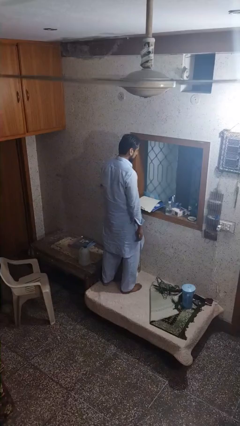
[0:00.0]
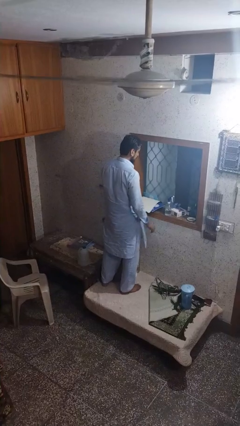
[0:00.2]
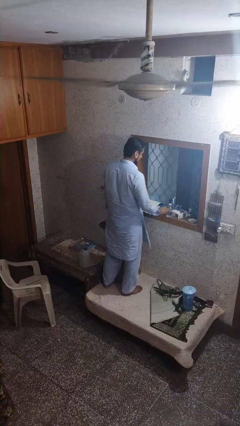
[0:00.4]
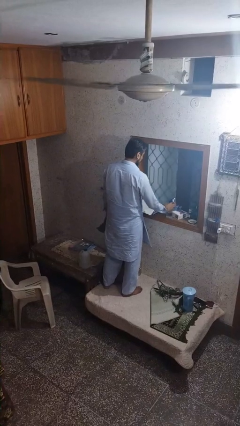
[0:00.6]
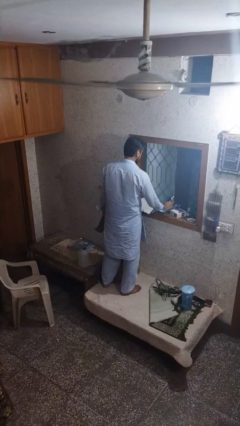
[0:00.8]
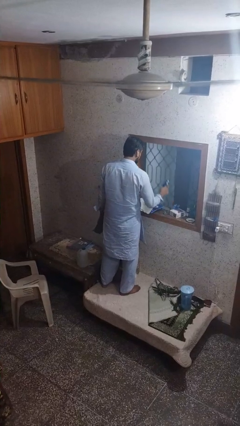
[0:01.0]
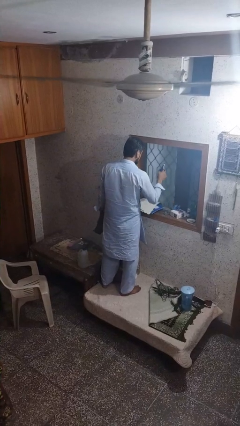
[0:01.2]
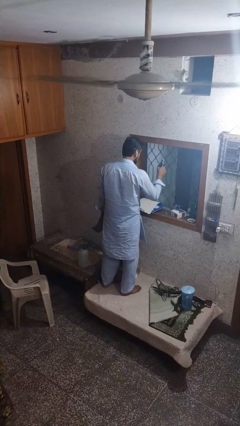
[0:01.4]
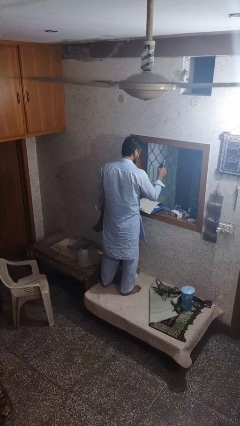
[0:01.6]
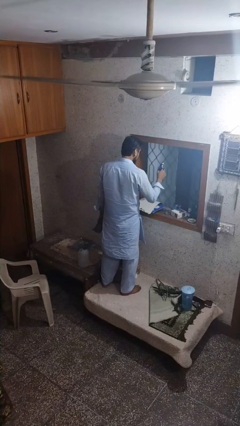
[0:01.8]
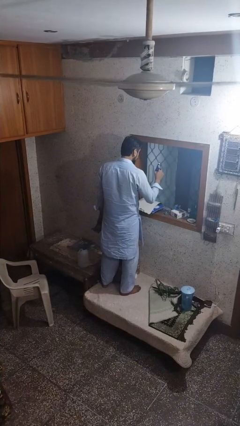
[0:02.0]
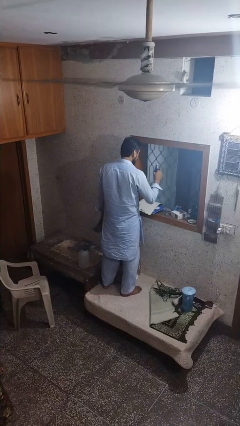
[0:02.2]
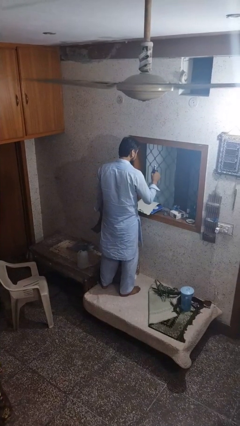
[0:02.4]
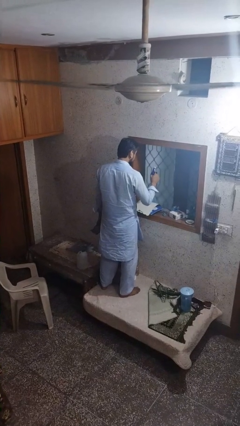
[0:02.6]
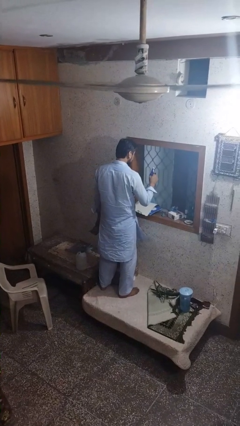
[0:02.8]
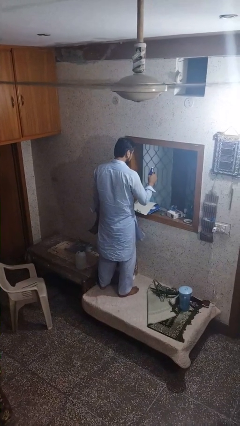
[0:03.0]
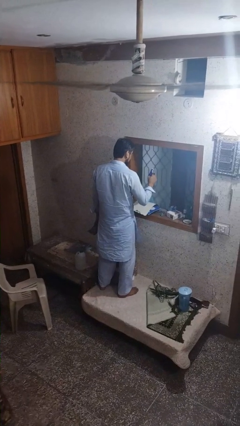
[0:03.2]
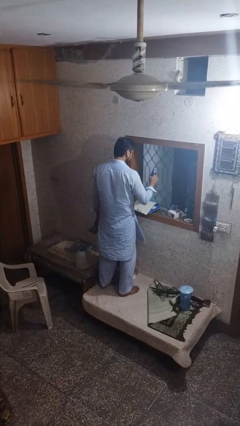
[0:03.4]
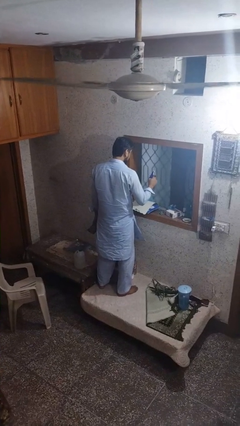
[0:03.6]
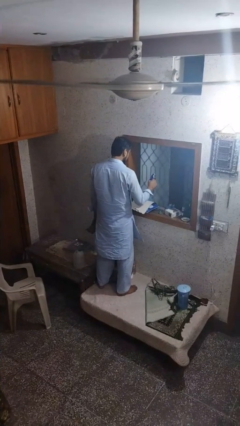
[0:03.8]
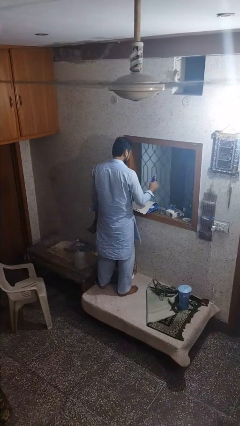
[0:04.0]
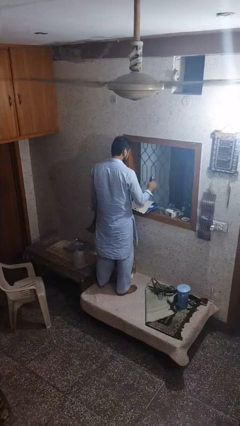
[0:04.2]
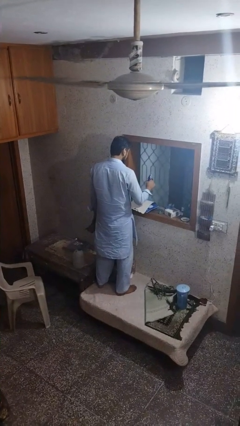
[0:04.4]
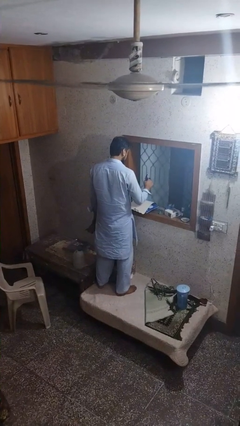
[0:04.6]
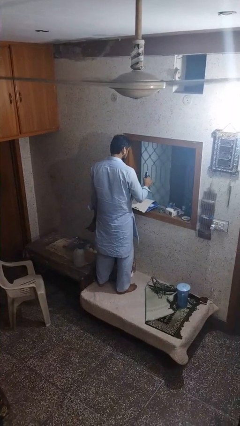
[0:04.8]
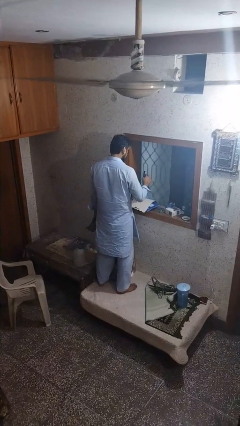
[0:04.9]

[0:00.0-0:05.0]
person sprays from bottle

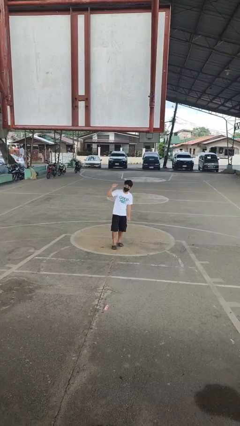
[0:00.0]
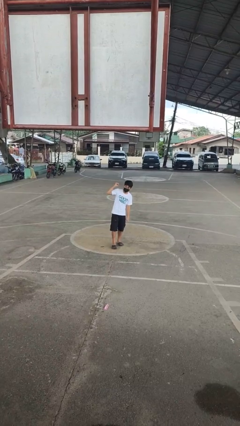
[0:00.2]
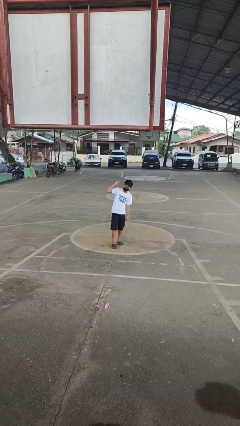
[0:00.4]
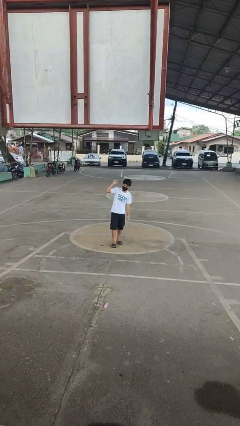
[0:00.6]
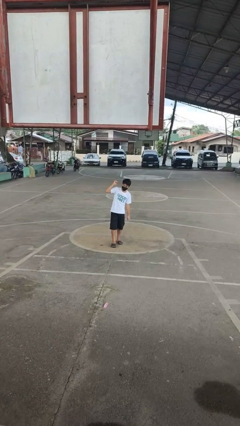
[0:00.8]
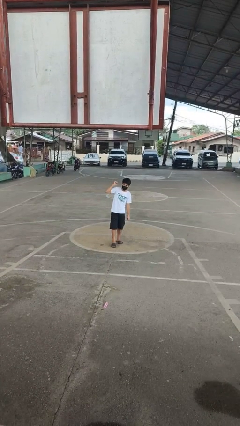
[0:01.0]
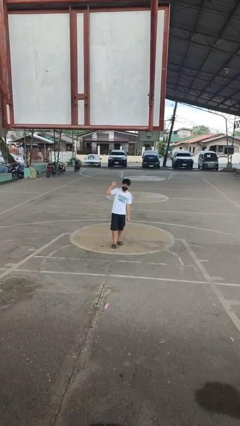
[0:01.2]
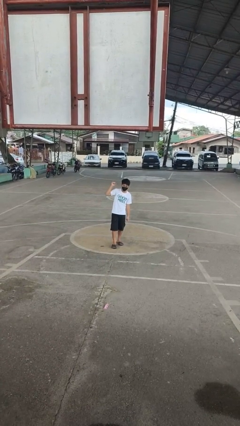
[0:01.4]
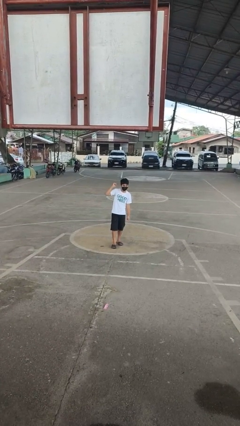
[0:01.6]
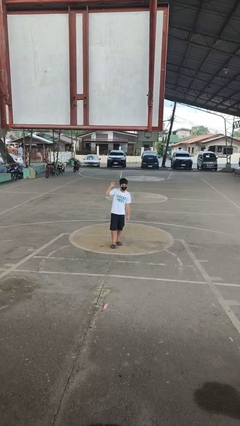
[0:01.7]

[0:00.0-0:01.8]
person gestures behind me

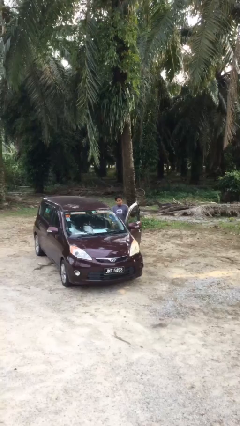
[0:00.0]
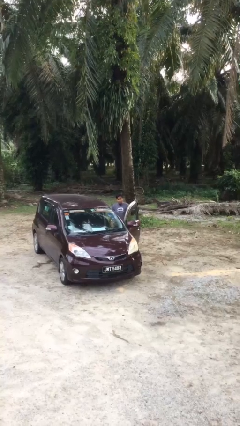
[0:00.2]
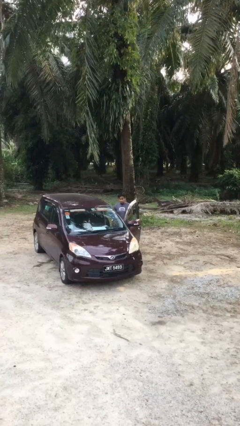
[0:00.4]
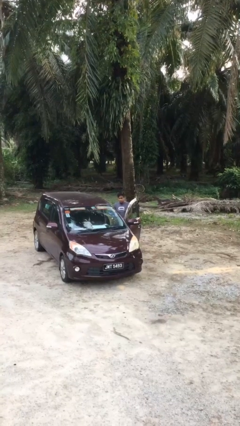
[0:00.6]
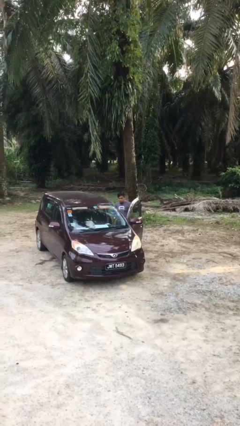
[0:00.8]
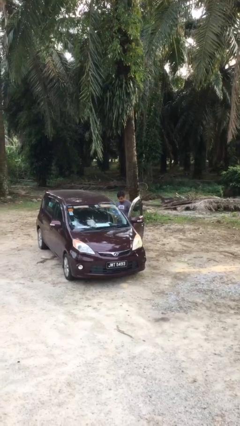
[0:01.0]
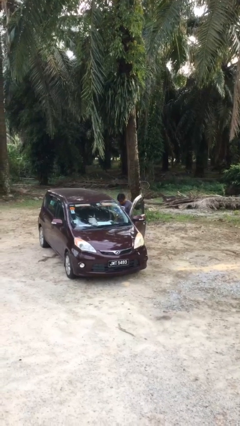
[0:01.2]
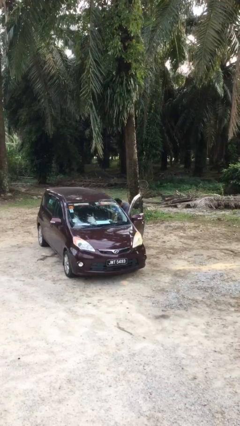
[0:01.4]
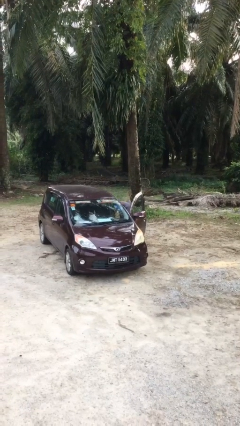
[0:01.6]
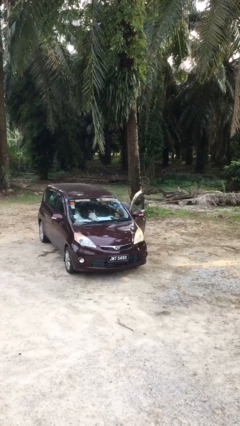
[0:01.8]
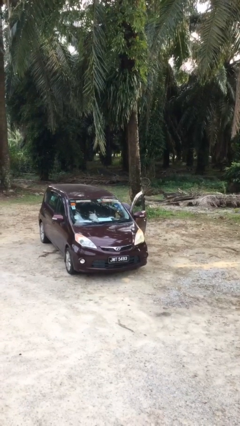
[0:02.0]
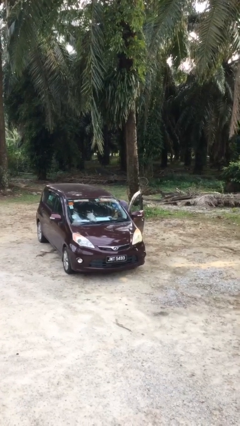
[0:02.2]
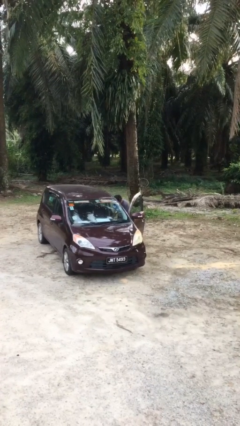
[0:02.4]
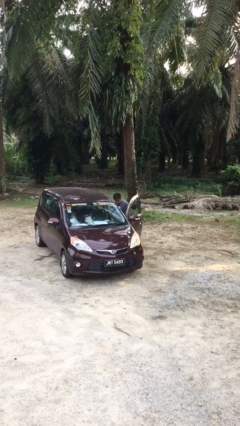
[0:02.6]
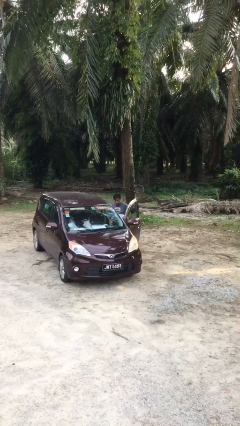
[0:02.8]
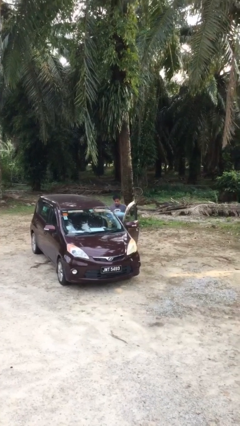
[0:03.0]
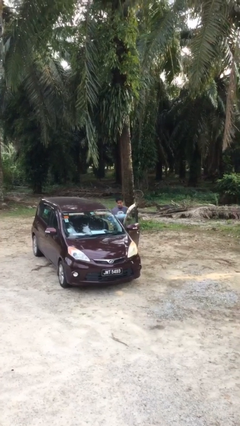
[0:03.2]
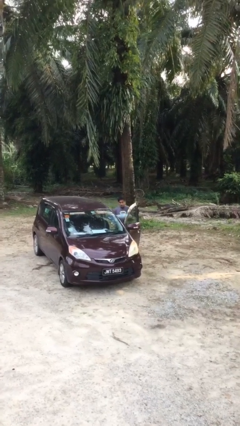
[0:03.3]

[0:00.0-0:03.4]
person unloads car

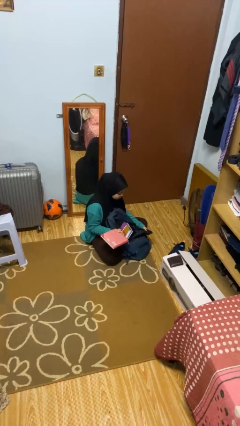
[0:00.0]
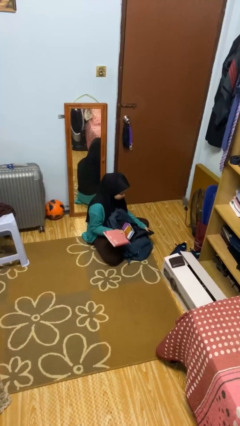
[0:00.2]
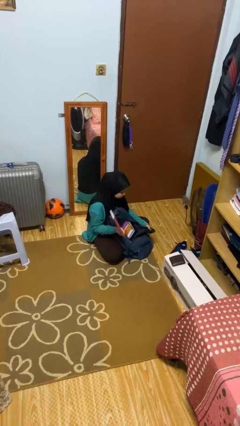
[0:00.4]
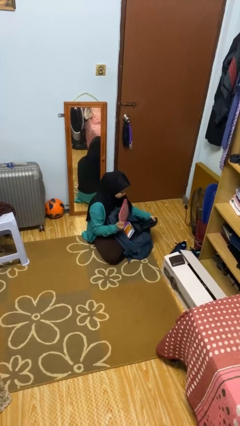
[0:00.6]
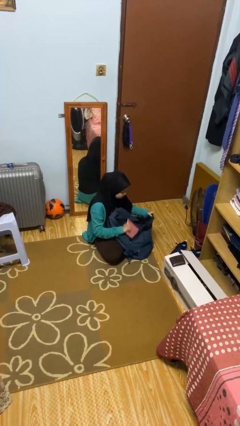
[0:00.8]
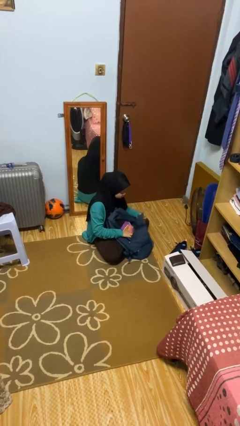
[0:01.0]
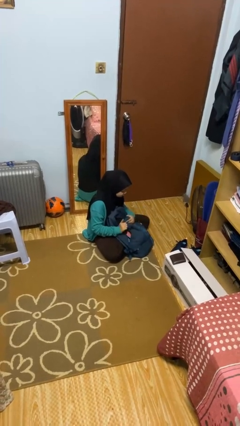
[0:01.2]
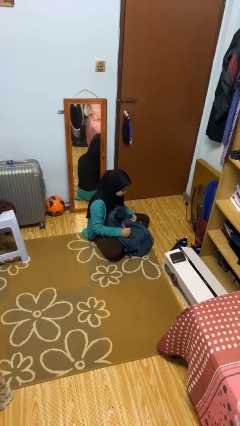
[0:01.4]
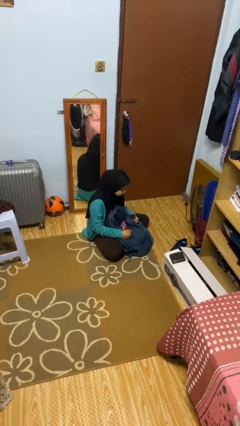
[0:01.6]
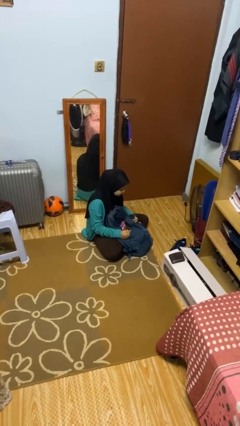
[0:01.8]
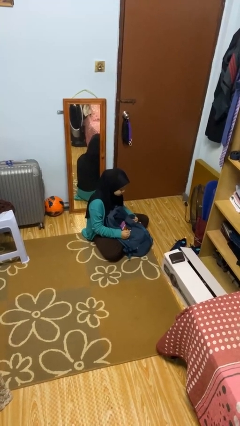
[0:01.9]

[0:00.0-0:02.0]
person puts object into backpack

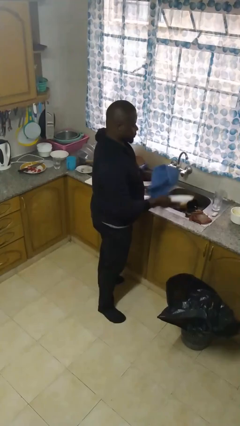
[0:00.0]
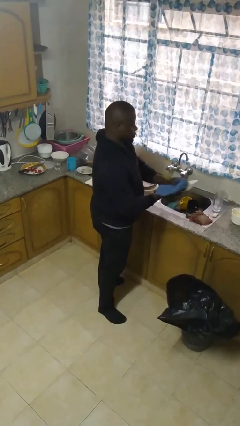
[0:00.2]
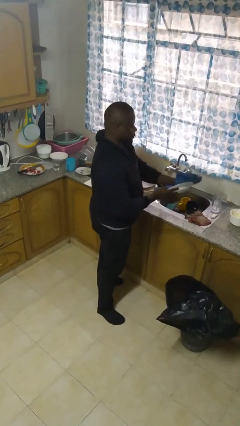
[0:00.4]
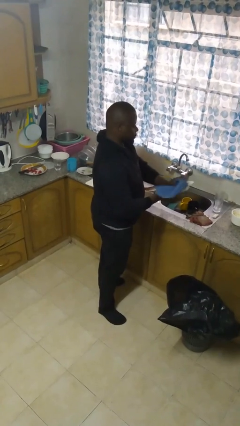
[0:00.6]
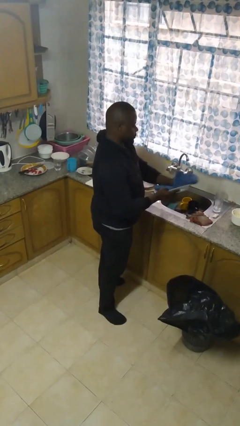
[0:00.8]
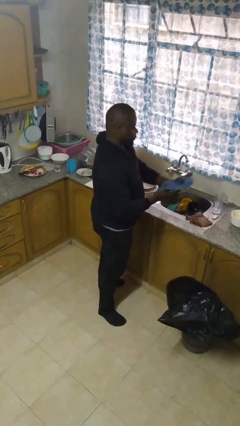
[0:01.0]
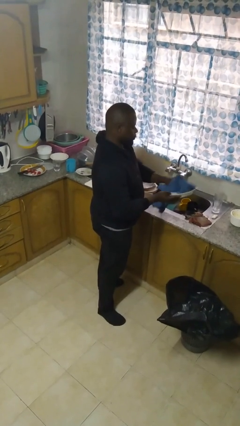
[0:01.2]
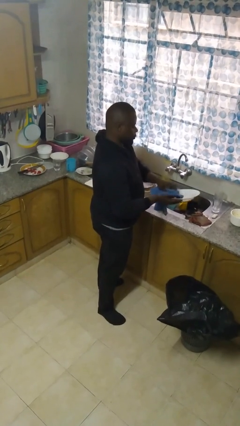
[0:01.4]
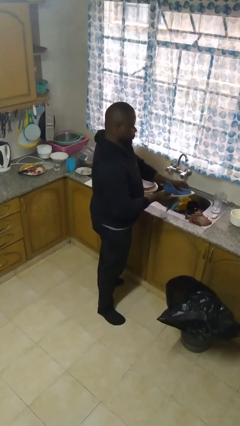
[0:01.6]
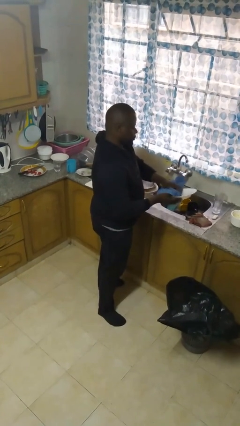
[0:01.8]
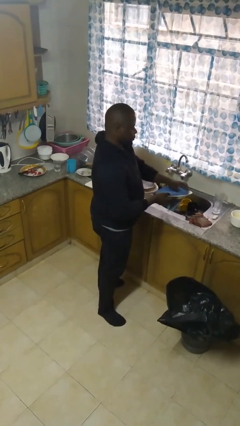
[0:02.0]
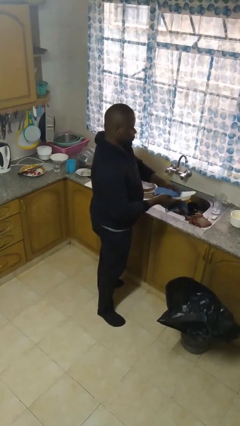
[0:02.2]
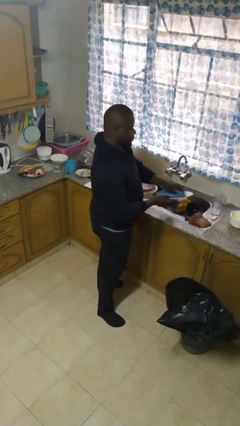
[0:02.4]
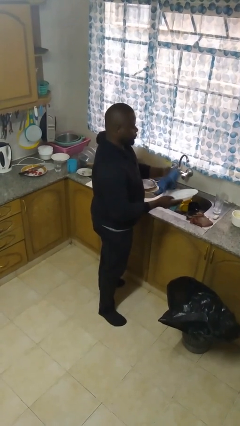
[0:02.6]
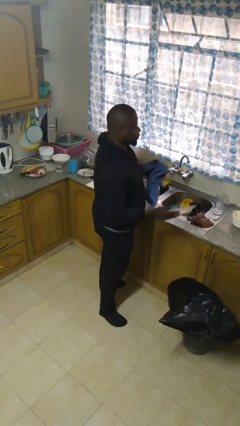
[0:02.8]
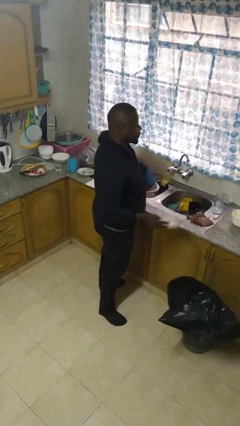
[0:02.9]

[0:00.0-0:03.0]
person dries dish

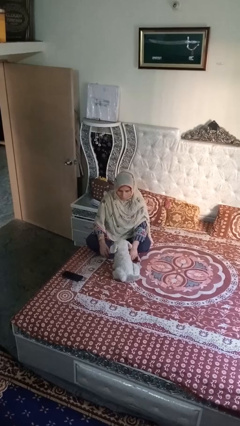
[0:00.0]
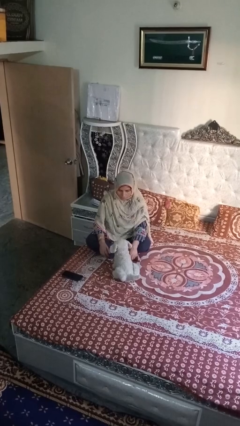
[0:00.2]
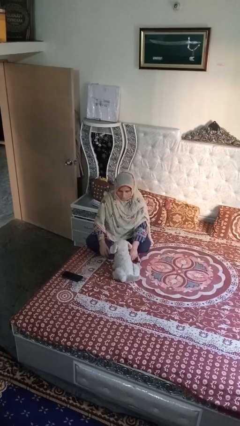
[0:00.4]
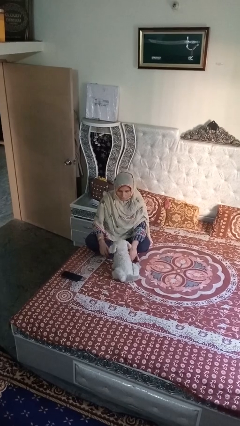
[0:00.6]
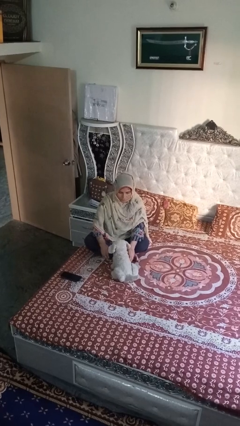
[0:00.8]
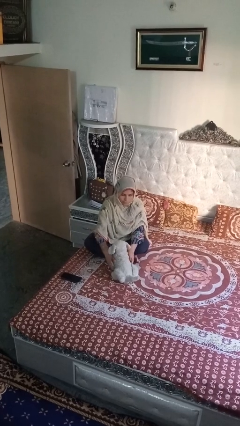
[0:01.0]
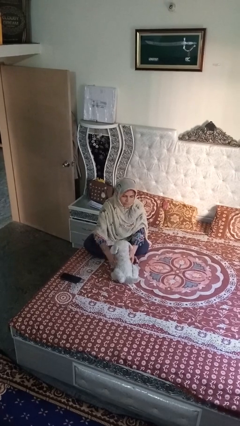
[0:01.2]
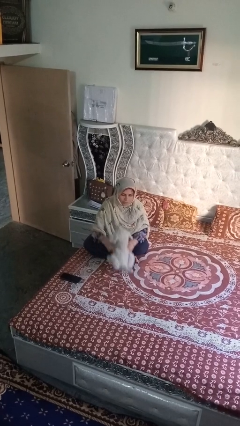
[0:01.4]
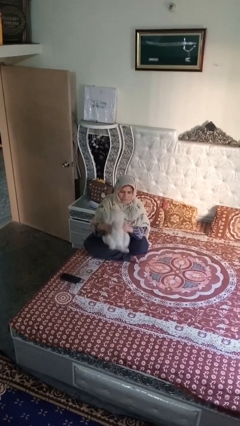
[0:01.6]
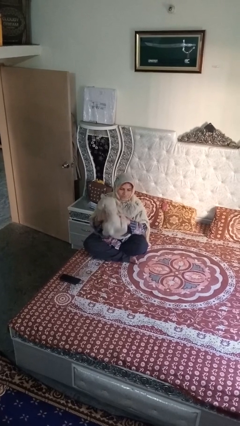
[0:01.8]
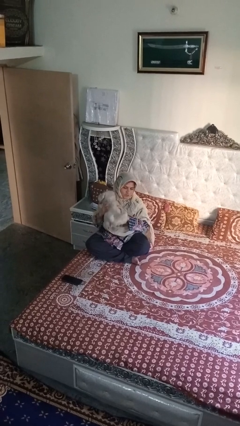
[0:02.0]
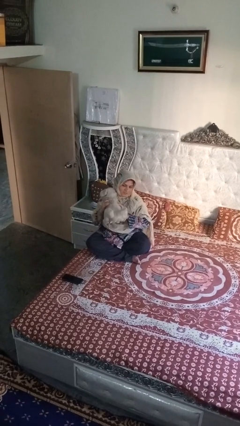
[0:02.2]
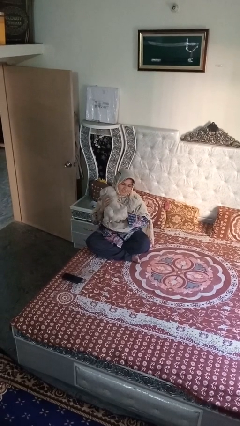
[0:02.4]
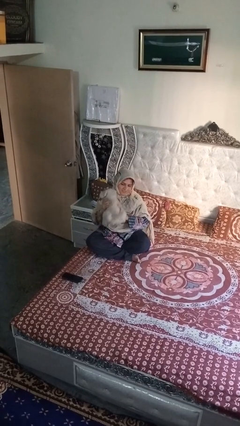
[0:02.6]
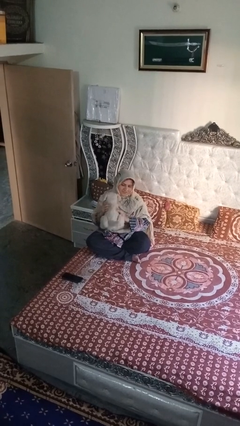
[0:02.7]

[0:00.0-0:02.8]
person hugs dog
